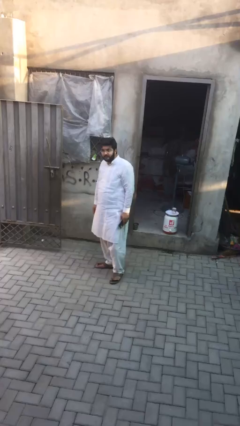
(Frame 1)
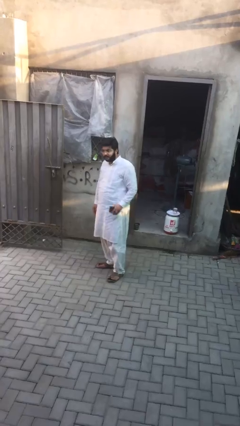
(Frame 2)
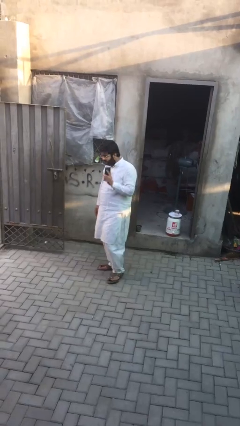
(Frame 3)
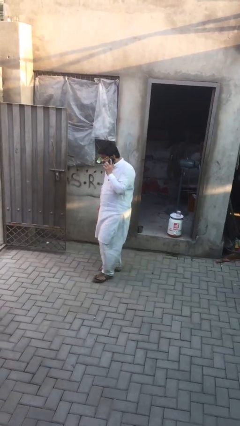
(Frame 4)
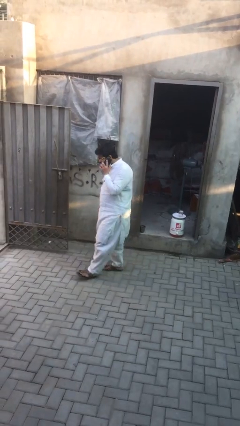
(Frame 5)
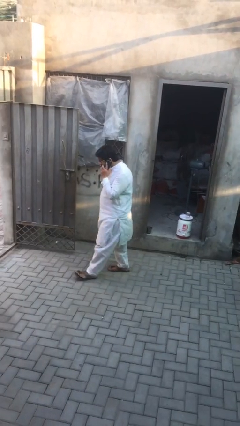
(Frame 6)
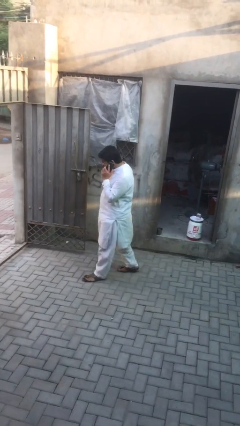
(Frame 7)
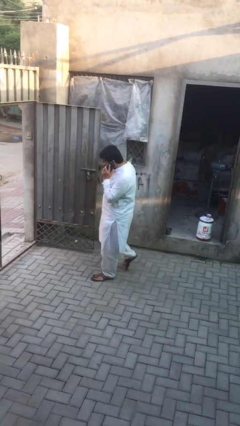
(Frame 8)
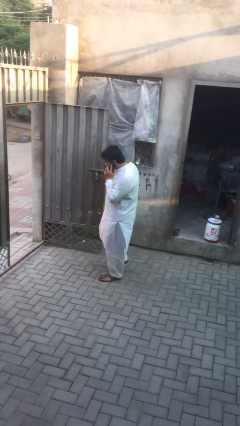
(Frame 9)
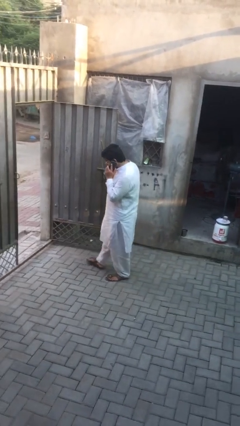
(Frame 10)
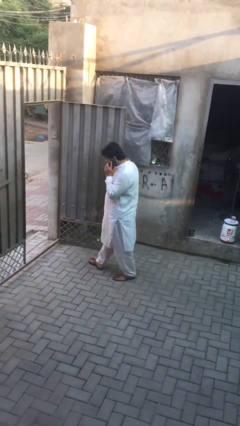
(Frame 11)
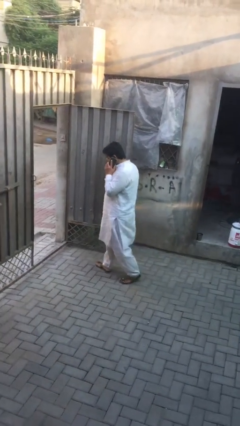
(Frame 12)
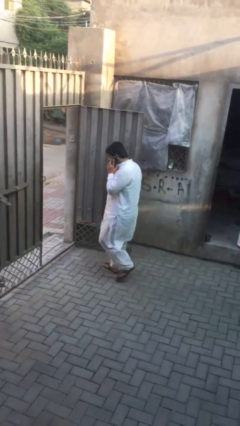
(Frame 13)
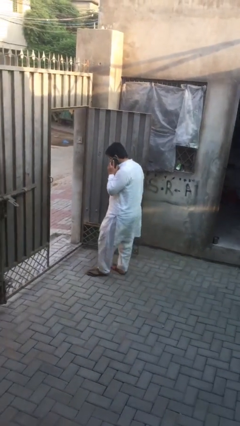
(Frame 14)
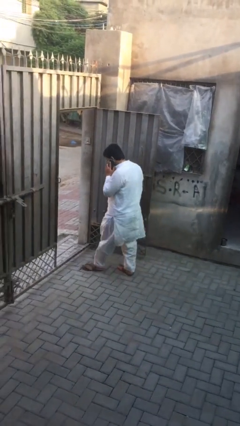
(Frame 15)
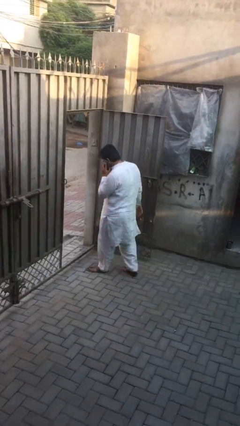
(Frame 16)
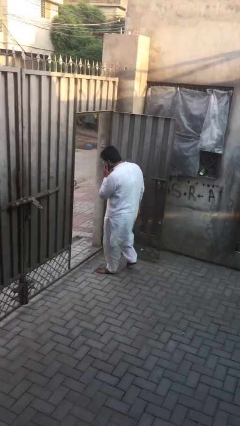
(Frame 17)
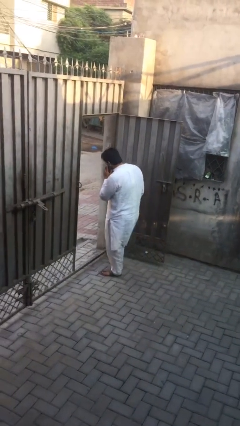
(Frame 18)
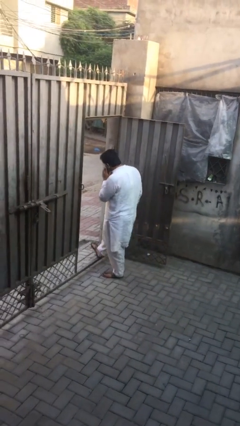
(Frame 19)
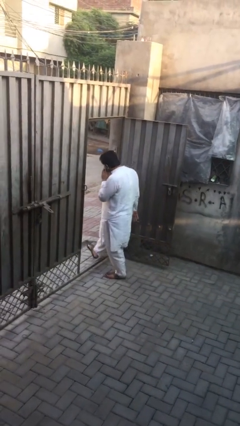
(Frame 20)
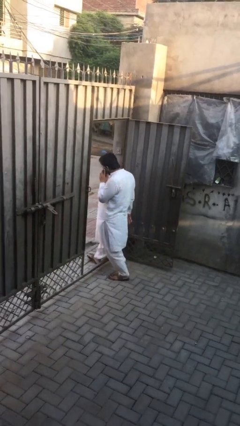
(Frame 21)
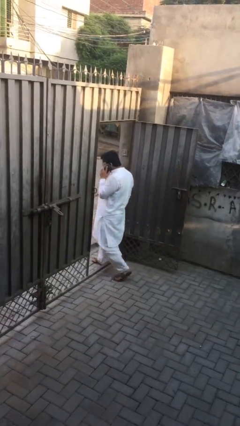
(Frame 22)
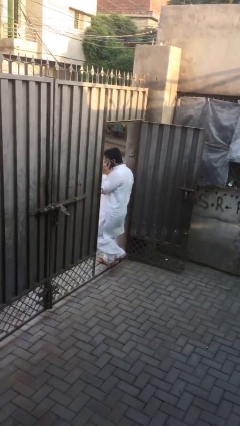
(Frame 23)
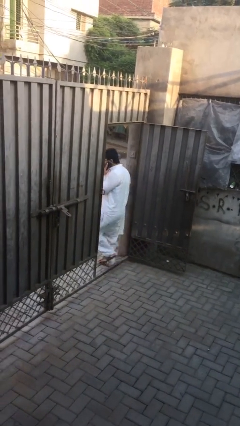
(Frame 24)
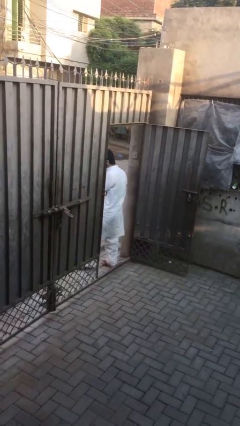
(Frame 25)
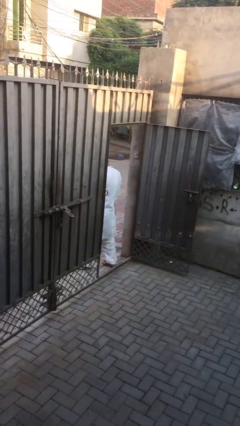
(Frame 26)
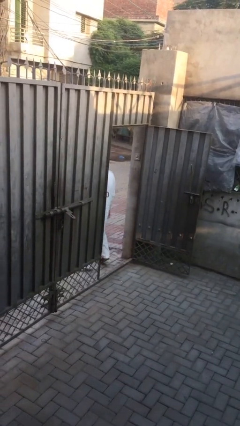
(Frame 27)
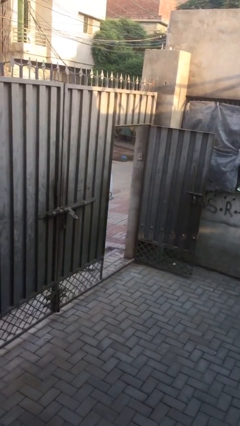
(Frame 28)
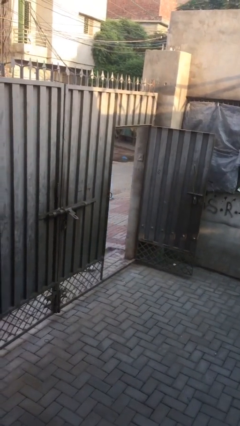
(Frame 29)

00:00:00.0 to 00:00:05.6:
person exits scene through structure

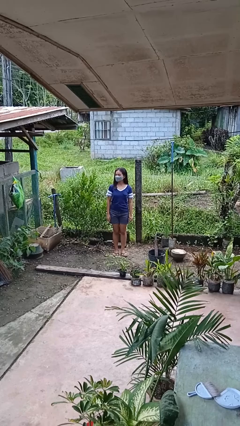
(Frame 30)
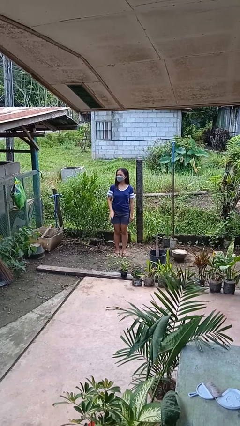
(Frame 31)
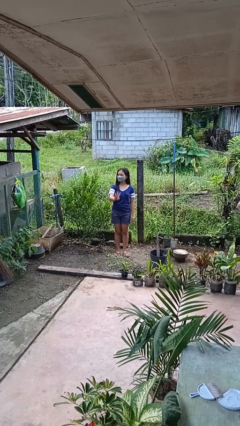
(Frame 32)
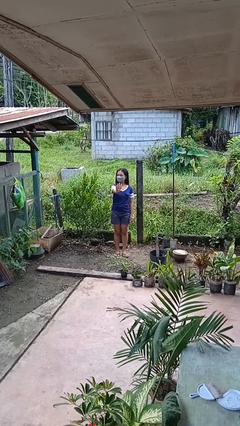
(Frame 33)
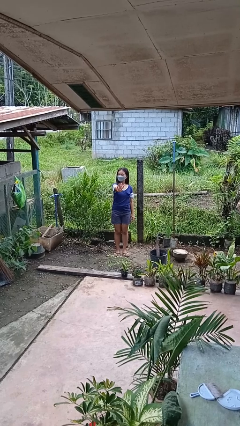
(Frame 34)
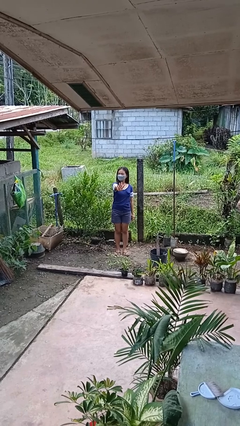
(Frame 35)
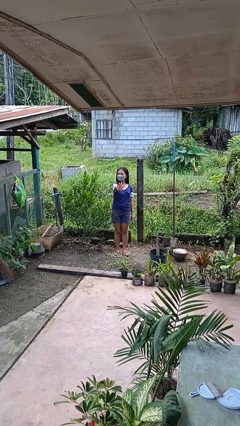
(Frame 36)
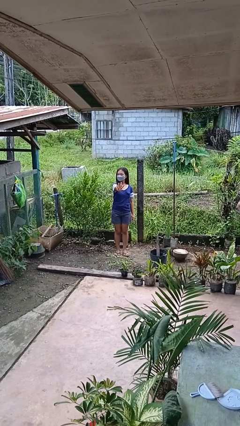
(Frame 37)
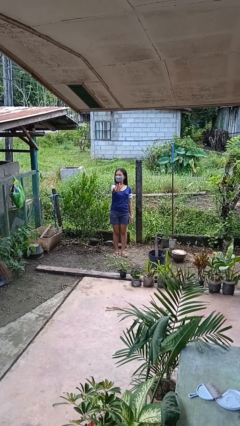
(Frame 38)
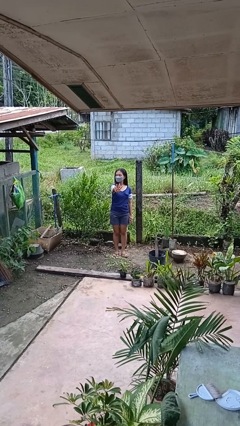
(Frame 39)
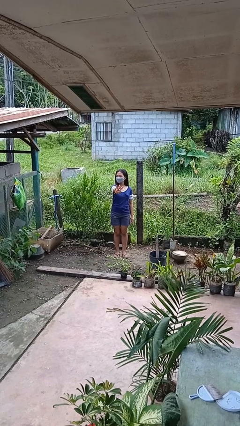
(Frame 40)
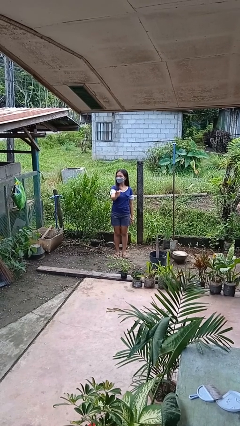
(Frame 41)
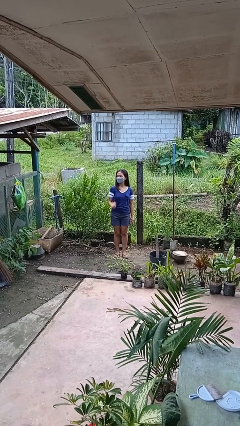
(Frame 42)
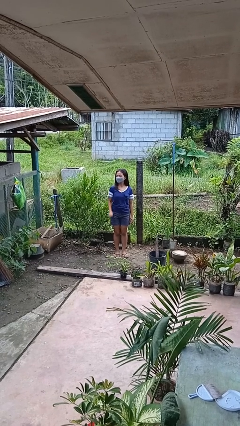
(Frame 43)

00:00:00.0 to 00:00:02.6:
person gestures number four

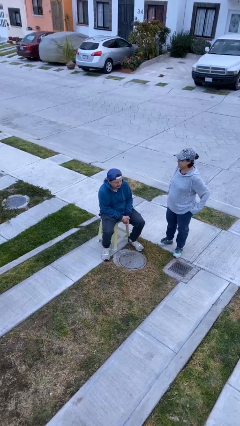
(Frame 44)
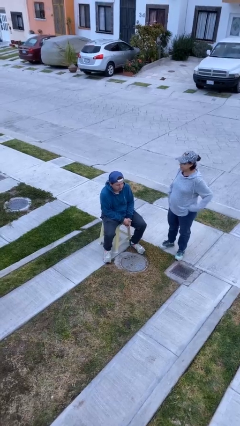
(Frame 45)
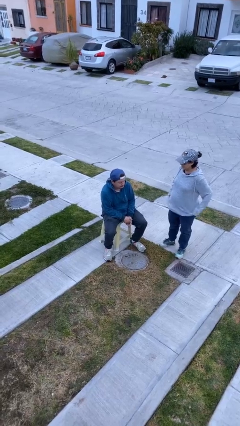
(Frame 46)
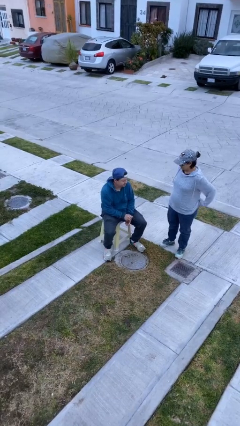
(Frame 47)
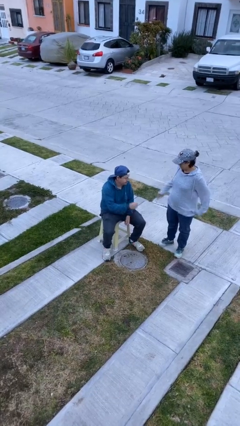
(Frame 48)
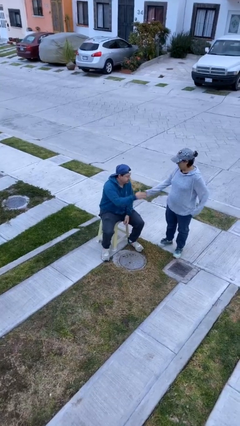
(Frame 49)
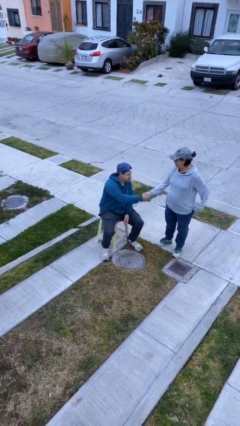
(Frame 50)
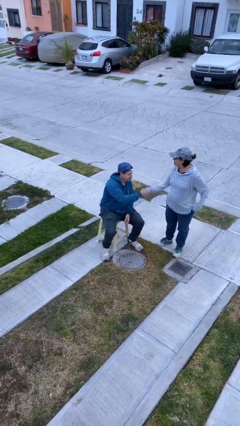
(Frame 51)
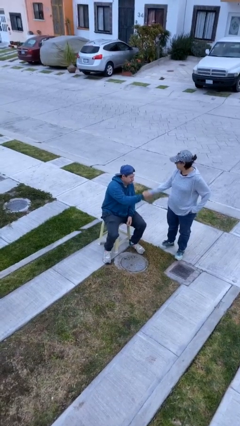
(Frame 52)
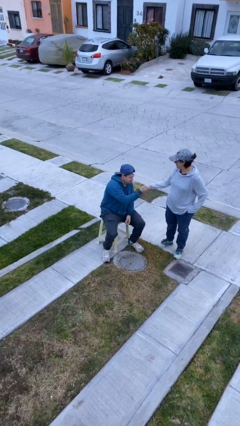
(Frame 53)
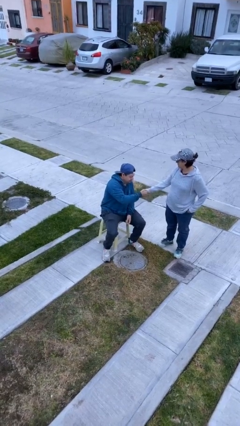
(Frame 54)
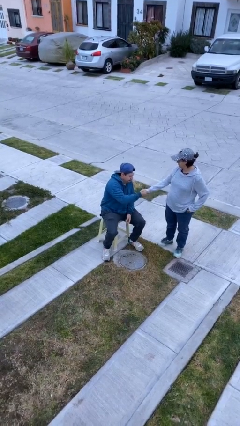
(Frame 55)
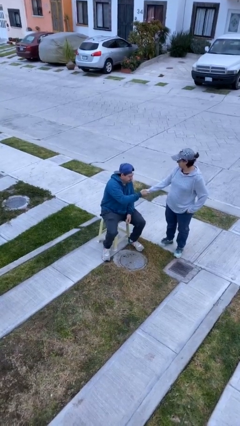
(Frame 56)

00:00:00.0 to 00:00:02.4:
person shakes hand

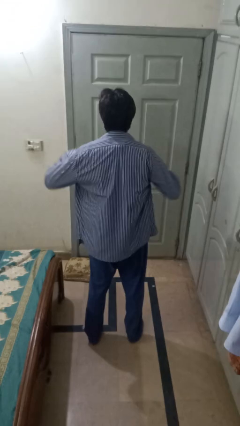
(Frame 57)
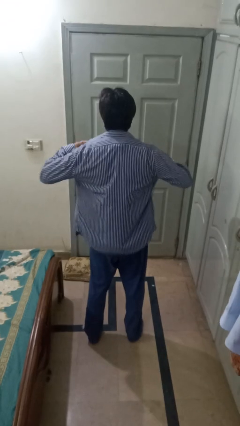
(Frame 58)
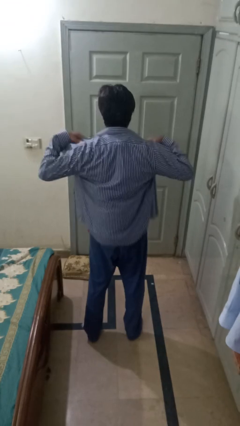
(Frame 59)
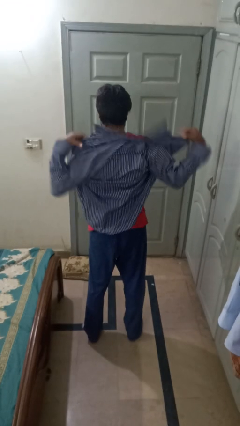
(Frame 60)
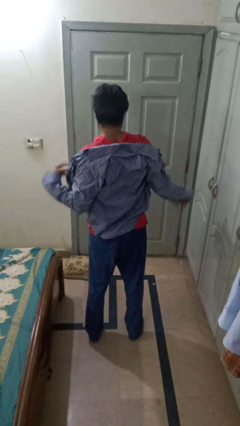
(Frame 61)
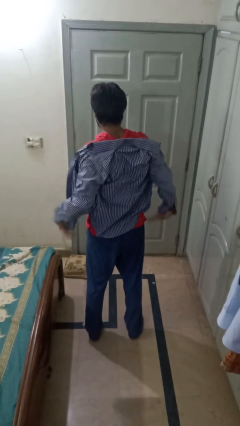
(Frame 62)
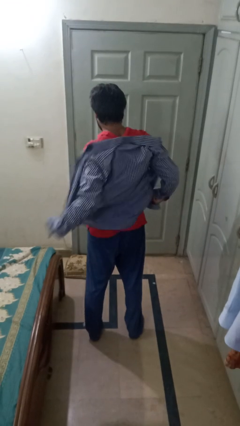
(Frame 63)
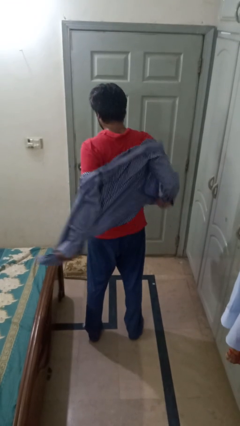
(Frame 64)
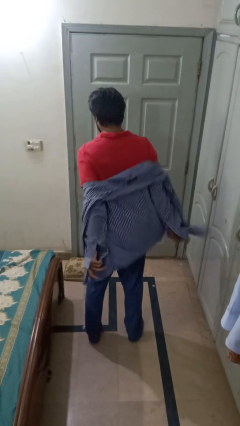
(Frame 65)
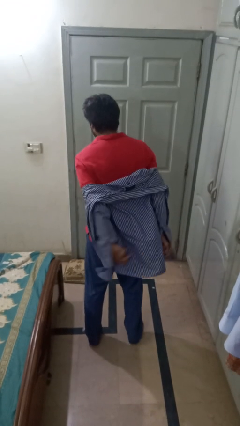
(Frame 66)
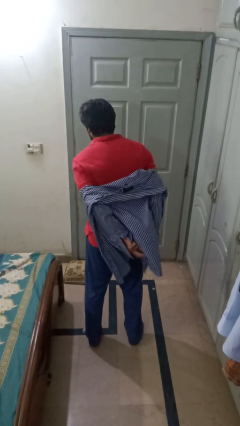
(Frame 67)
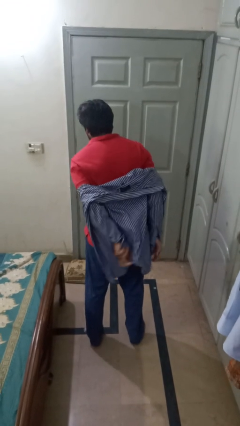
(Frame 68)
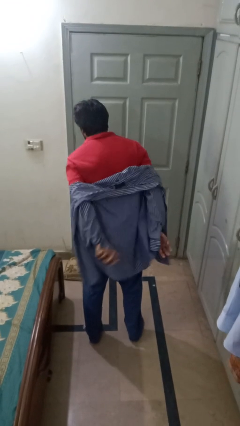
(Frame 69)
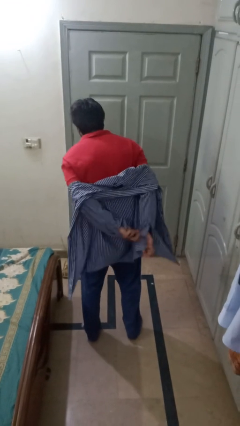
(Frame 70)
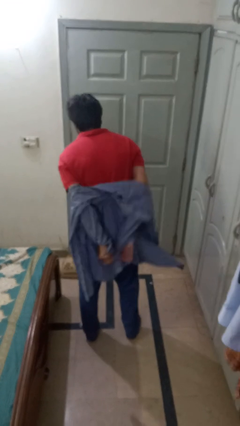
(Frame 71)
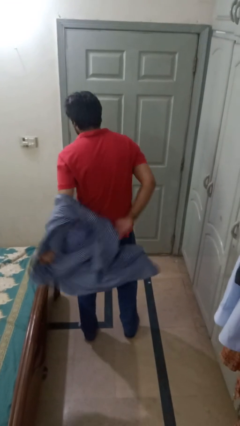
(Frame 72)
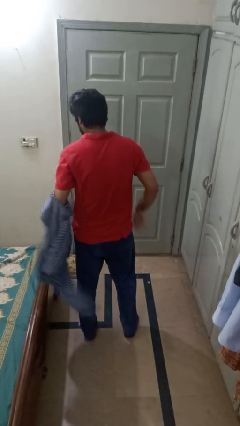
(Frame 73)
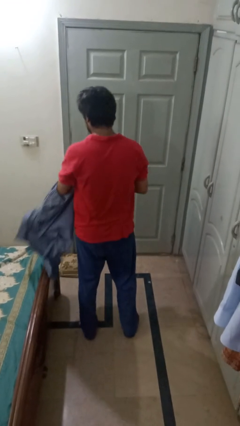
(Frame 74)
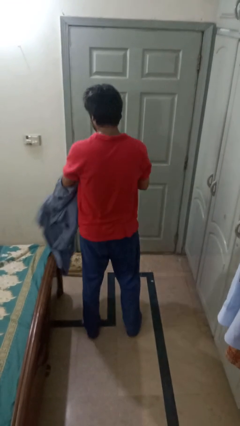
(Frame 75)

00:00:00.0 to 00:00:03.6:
person takes off shirt

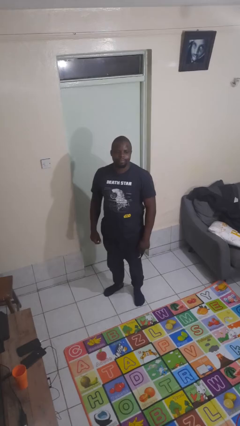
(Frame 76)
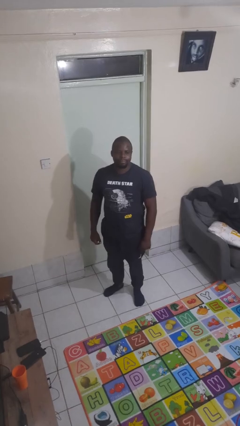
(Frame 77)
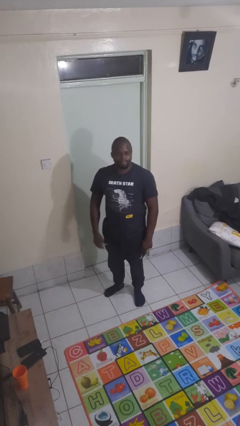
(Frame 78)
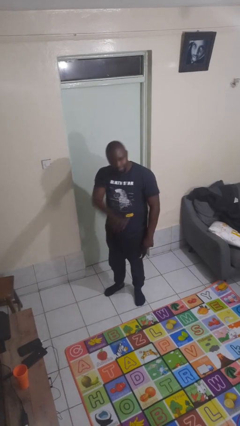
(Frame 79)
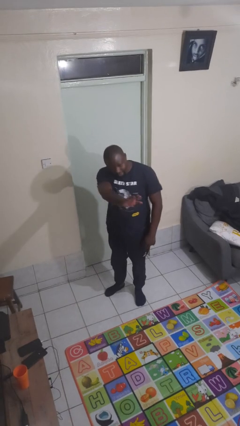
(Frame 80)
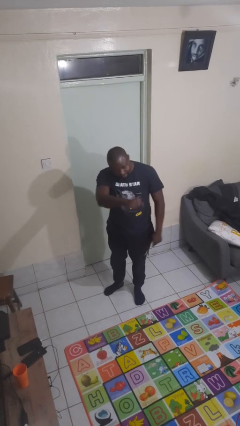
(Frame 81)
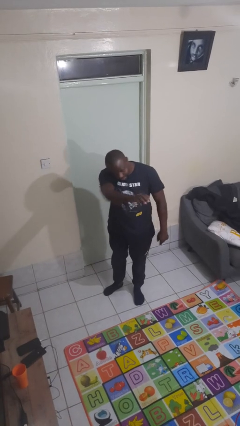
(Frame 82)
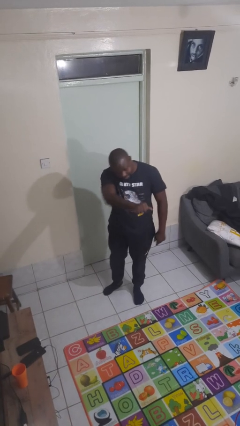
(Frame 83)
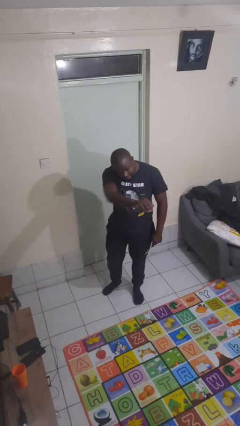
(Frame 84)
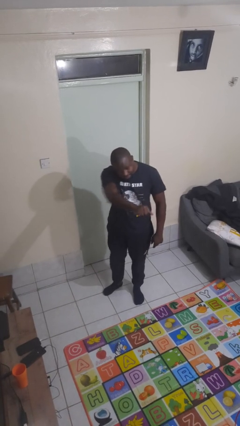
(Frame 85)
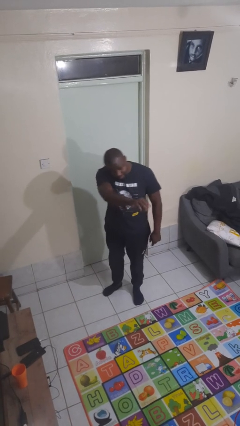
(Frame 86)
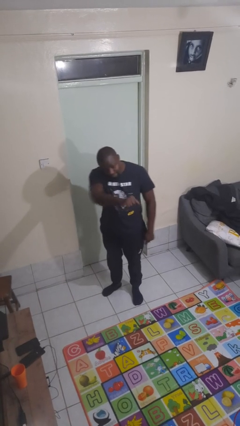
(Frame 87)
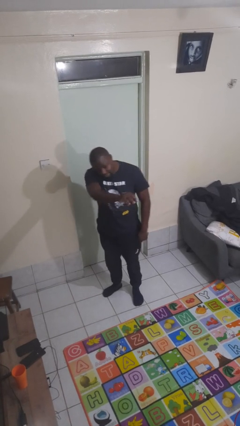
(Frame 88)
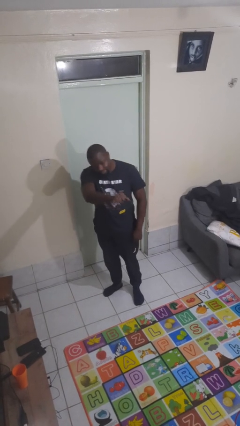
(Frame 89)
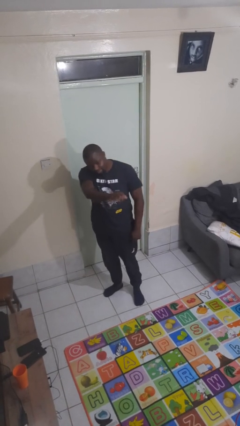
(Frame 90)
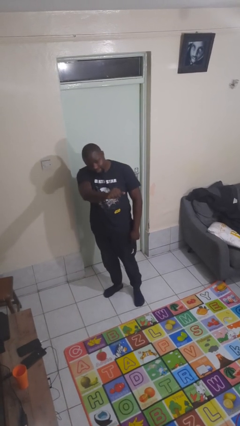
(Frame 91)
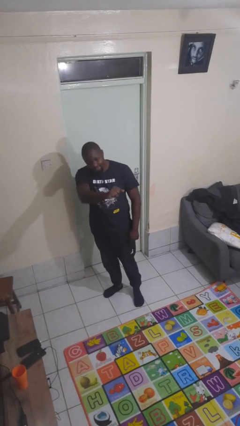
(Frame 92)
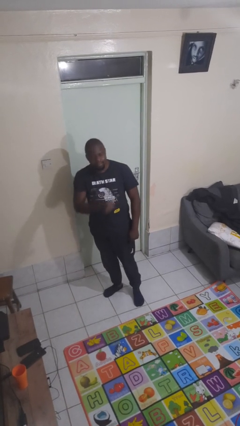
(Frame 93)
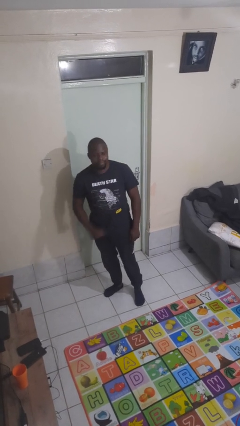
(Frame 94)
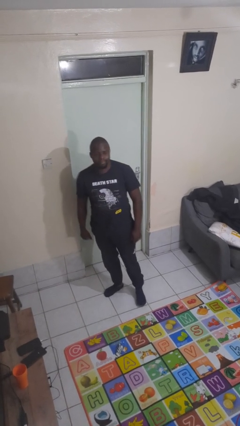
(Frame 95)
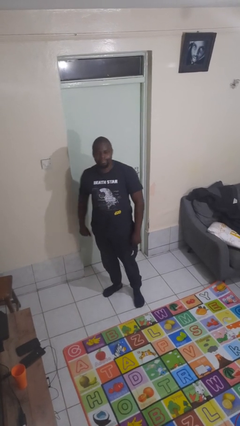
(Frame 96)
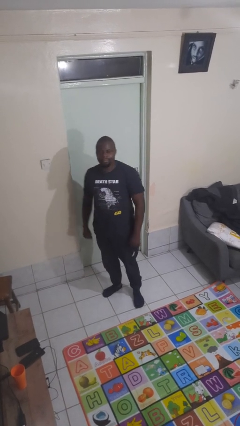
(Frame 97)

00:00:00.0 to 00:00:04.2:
person gestures come here
